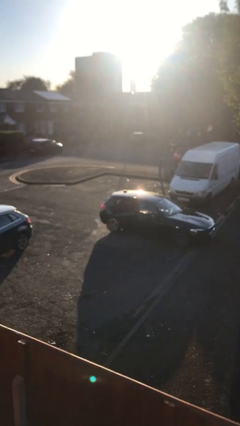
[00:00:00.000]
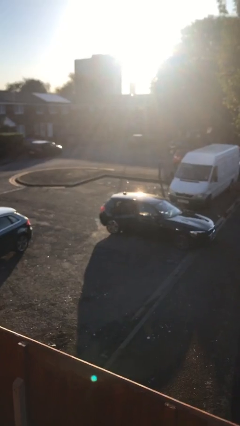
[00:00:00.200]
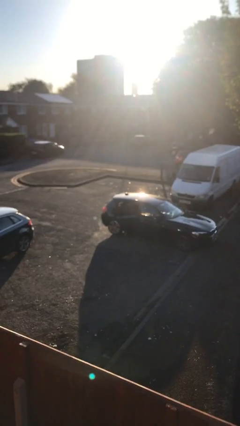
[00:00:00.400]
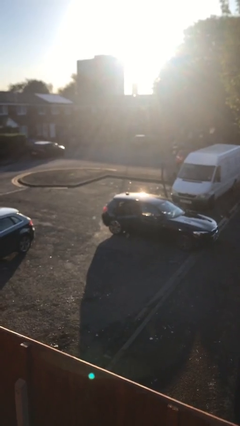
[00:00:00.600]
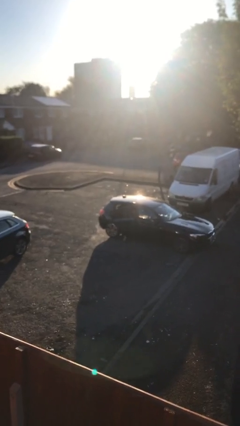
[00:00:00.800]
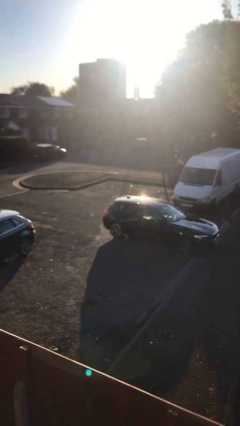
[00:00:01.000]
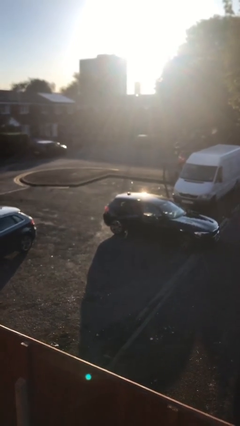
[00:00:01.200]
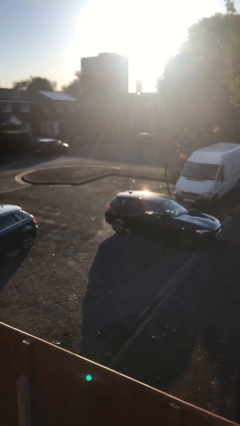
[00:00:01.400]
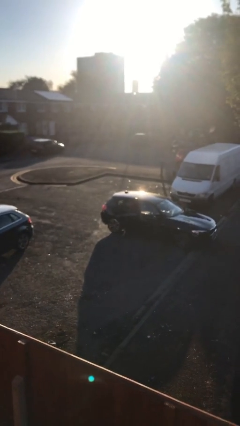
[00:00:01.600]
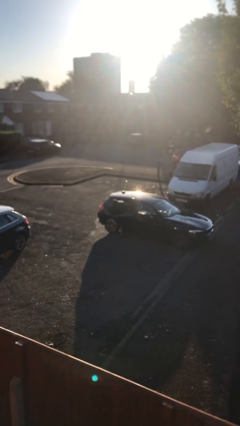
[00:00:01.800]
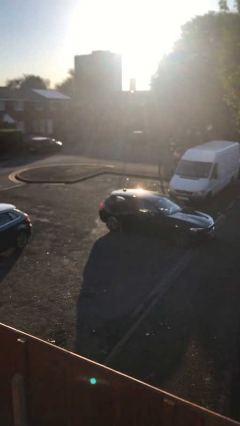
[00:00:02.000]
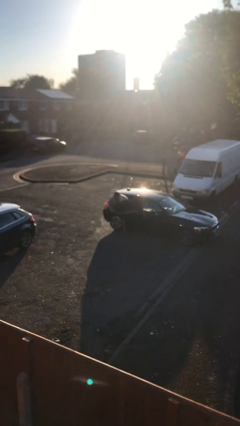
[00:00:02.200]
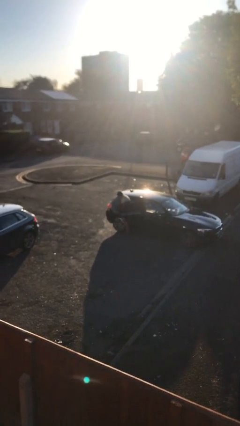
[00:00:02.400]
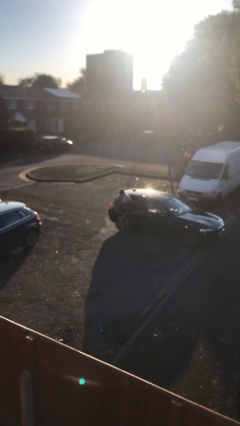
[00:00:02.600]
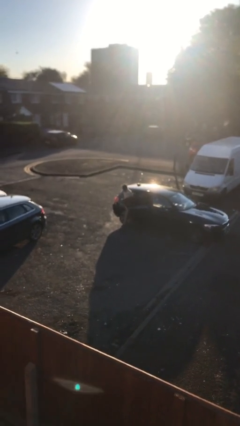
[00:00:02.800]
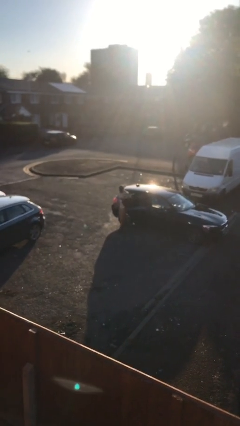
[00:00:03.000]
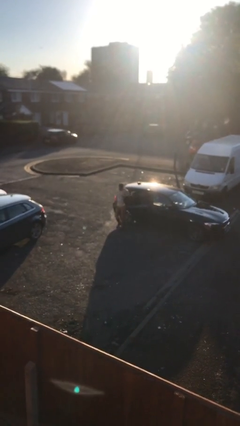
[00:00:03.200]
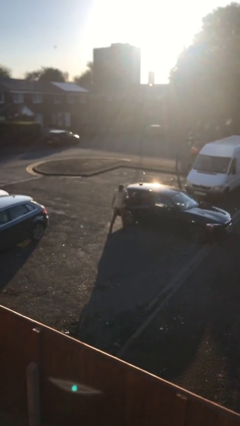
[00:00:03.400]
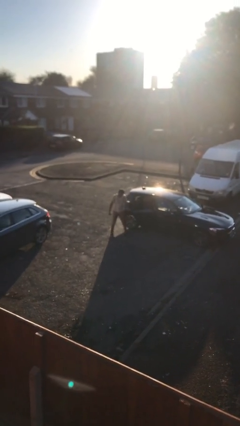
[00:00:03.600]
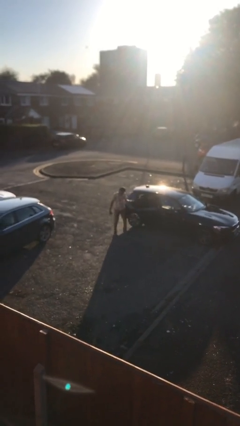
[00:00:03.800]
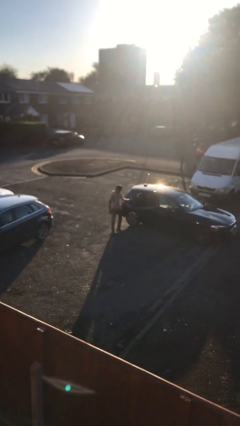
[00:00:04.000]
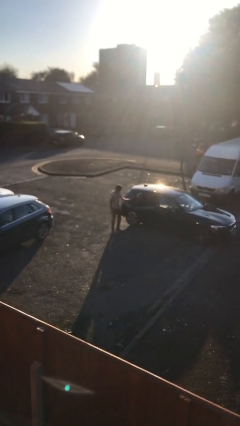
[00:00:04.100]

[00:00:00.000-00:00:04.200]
person exits car

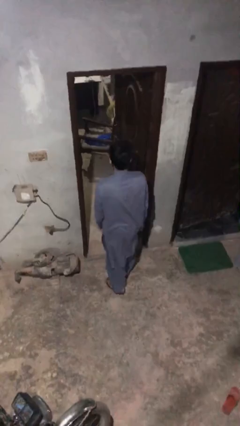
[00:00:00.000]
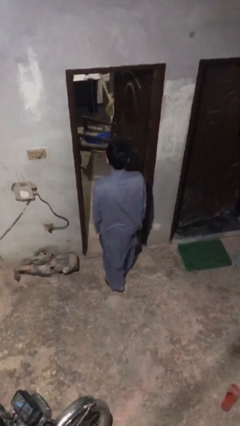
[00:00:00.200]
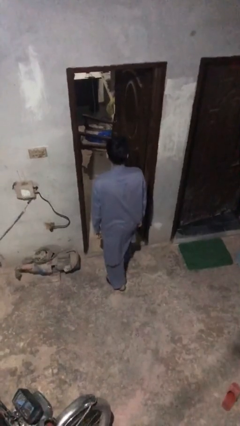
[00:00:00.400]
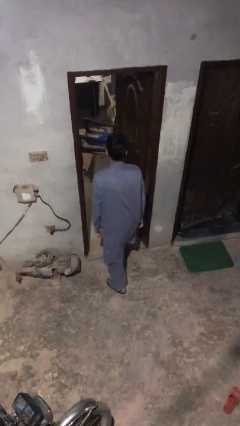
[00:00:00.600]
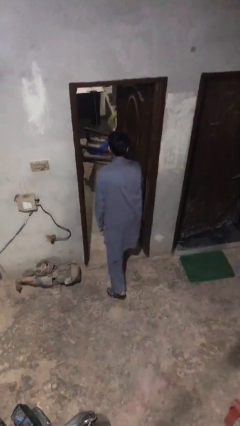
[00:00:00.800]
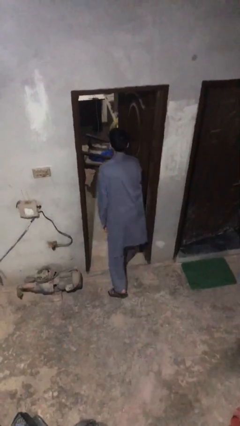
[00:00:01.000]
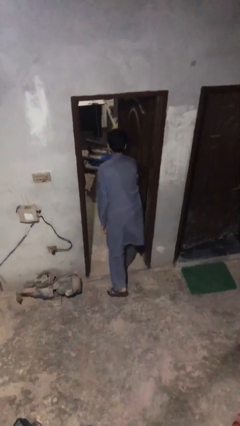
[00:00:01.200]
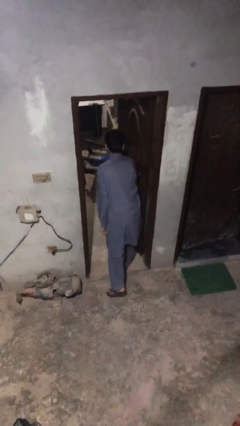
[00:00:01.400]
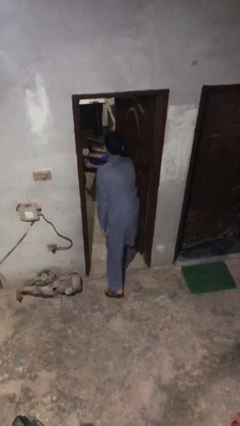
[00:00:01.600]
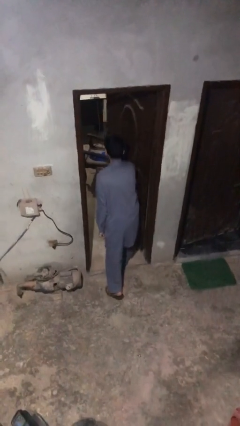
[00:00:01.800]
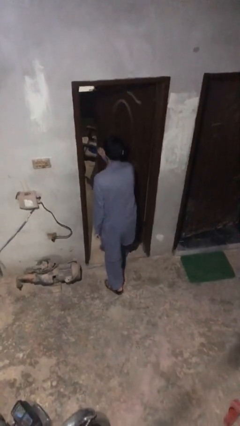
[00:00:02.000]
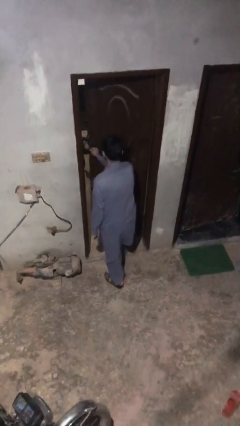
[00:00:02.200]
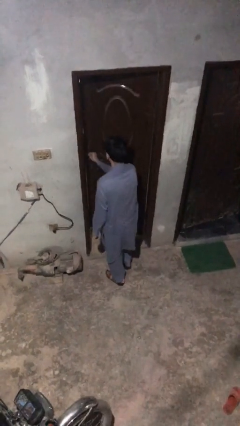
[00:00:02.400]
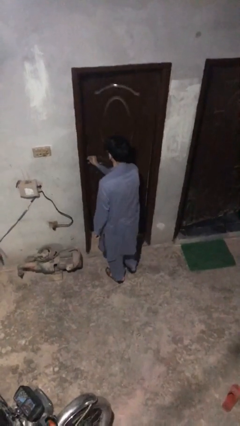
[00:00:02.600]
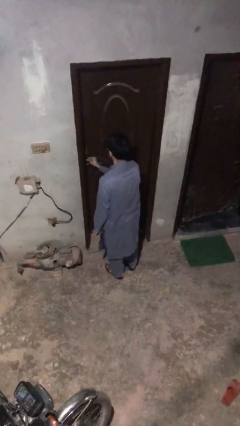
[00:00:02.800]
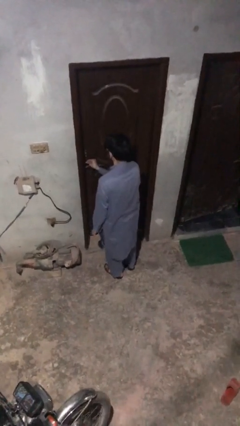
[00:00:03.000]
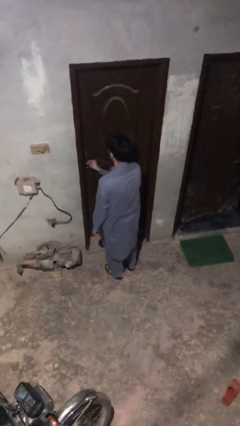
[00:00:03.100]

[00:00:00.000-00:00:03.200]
person closes facility door

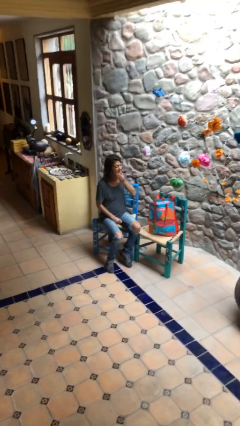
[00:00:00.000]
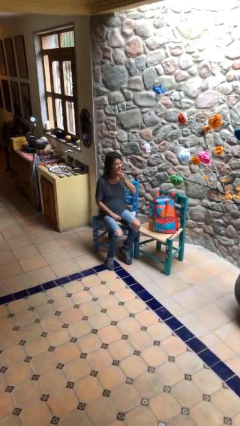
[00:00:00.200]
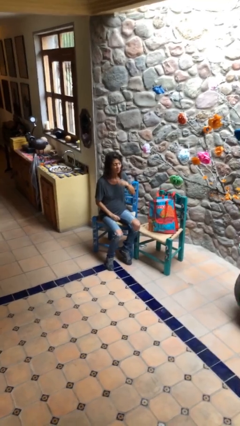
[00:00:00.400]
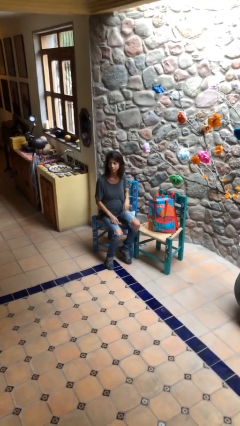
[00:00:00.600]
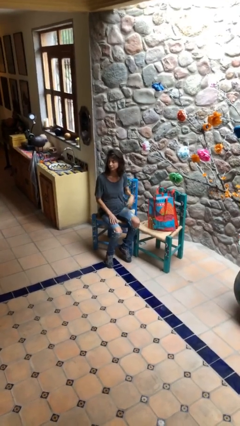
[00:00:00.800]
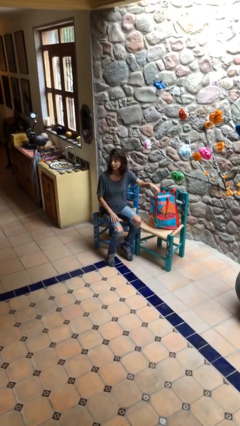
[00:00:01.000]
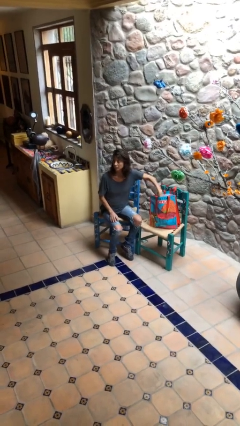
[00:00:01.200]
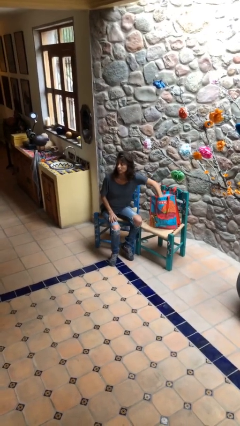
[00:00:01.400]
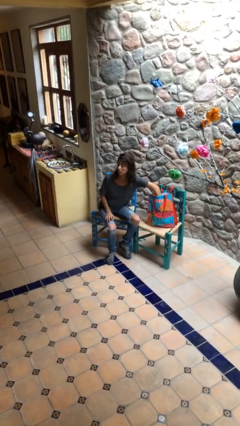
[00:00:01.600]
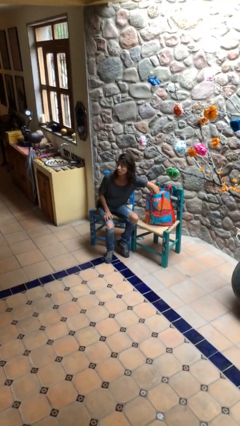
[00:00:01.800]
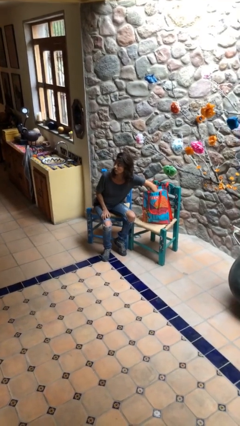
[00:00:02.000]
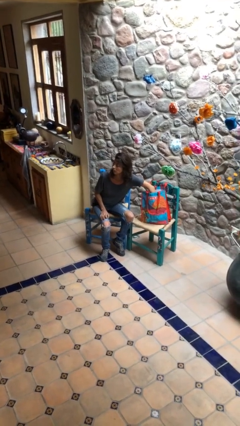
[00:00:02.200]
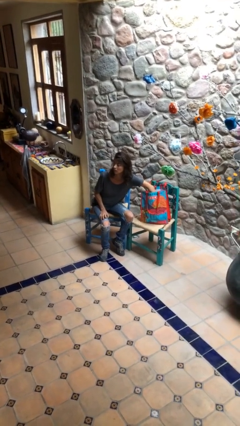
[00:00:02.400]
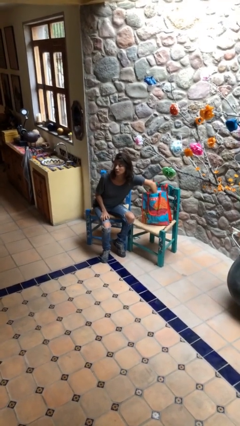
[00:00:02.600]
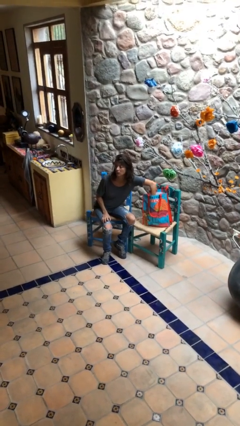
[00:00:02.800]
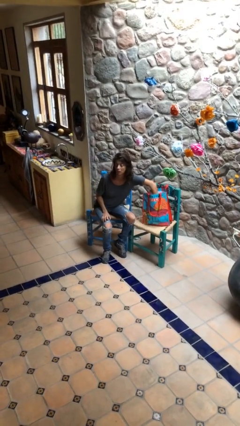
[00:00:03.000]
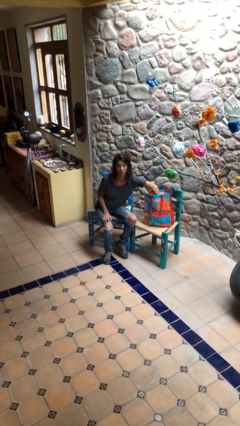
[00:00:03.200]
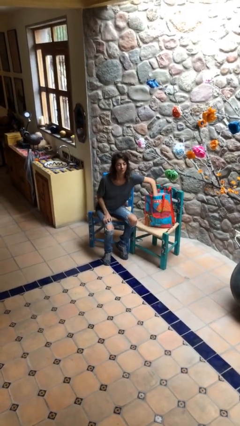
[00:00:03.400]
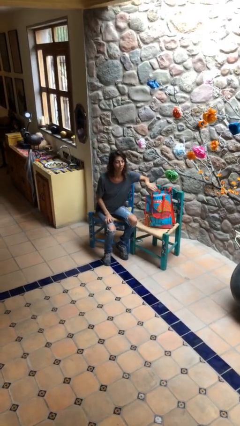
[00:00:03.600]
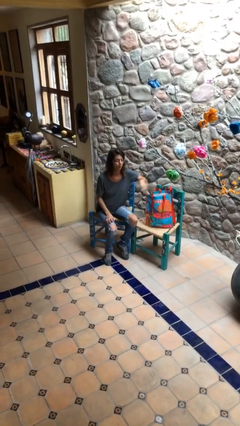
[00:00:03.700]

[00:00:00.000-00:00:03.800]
person searches in bag

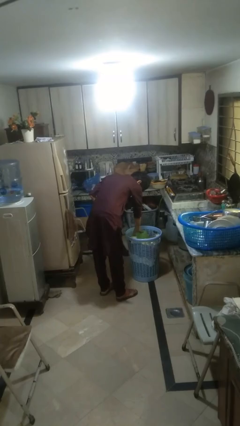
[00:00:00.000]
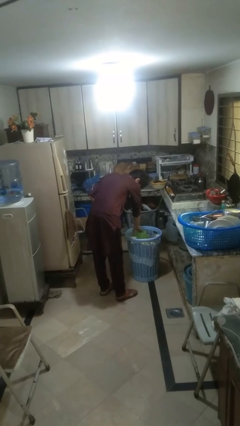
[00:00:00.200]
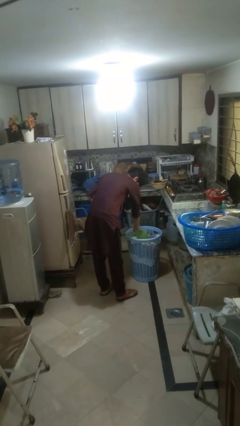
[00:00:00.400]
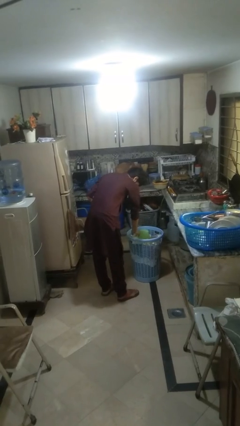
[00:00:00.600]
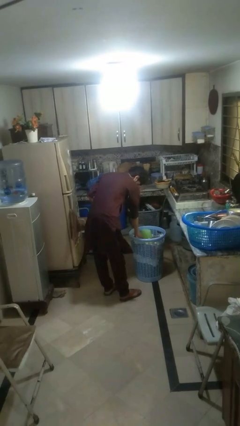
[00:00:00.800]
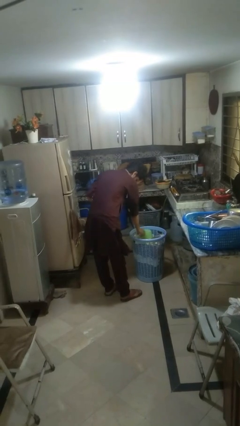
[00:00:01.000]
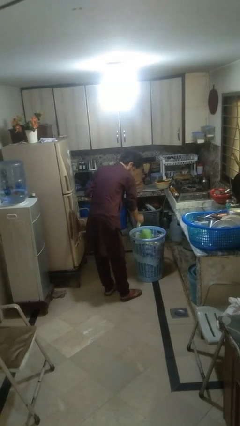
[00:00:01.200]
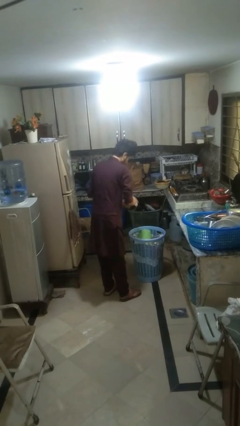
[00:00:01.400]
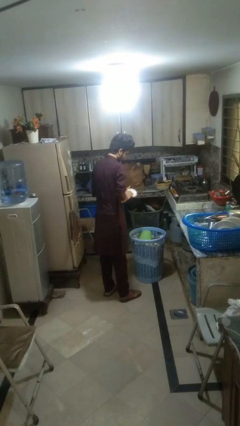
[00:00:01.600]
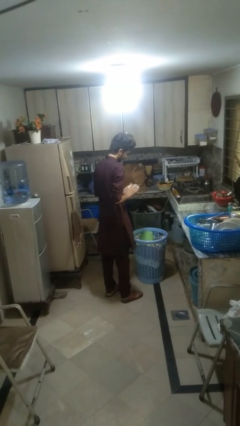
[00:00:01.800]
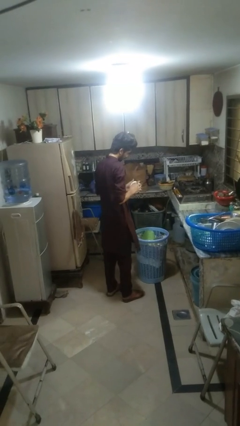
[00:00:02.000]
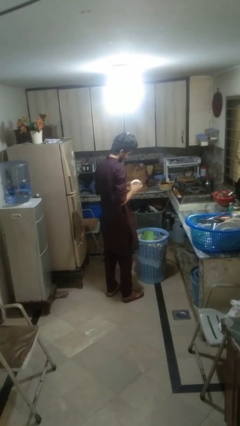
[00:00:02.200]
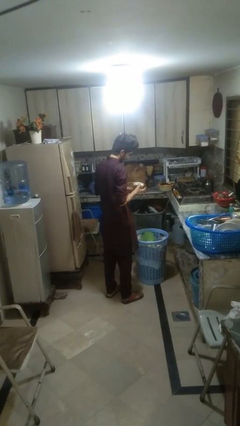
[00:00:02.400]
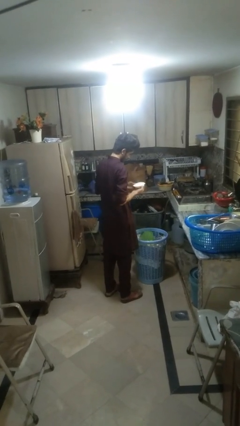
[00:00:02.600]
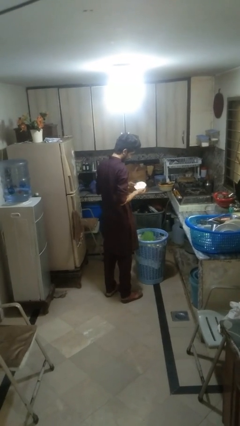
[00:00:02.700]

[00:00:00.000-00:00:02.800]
person takes object from basket

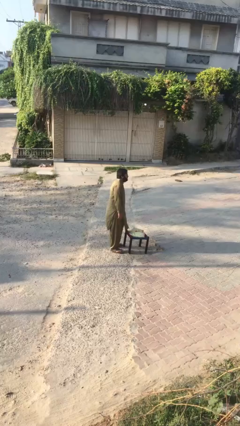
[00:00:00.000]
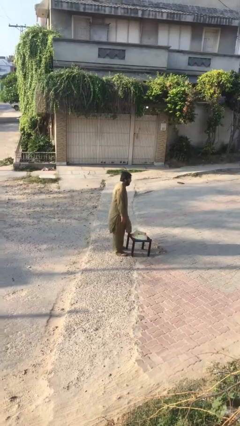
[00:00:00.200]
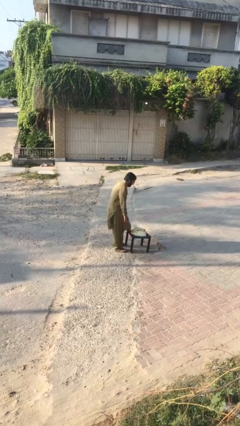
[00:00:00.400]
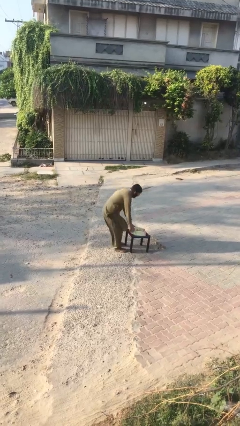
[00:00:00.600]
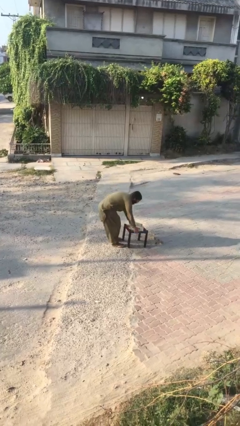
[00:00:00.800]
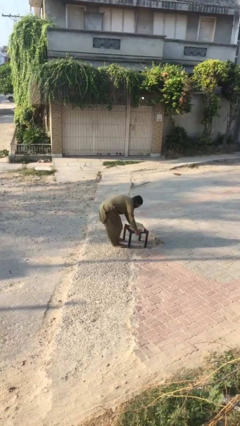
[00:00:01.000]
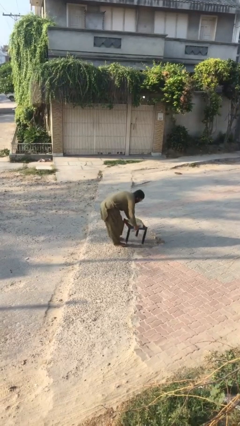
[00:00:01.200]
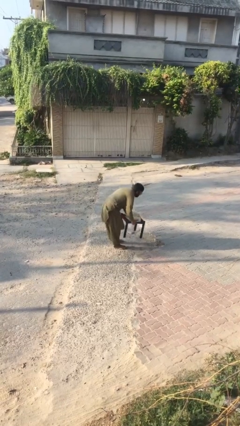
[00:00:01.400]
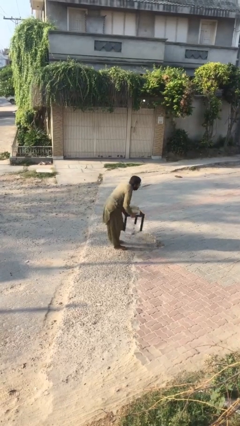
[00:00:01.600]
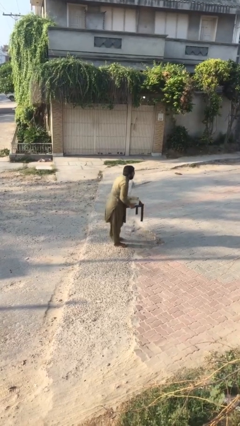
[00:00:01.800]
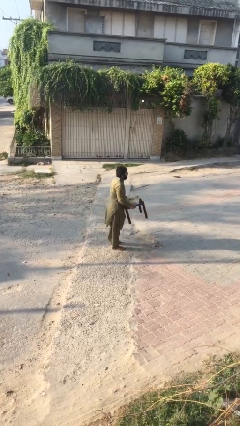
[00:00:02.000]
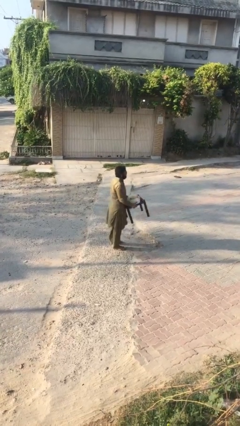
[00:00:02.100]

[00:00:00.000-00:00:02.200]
person picks up object from floor

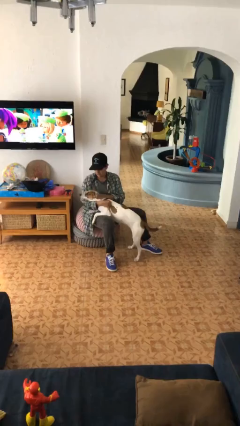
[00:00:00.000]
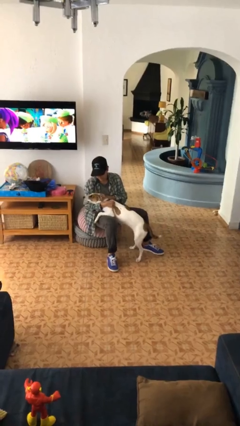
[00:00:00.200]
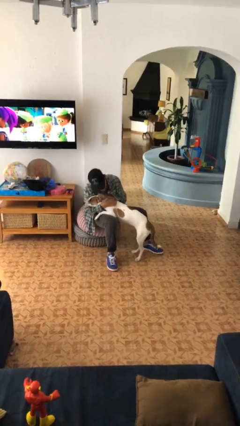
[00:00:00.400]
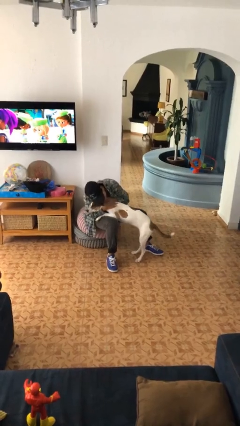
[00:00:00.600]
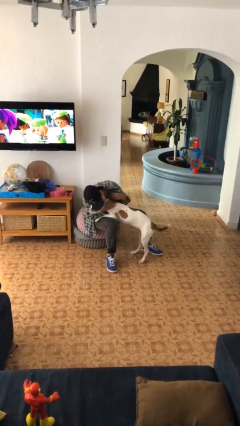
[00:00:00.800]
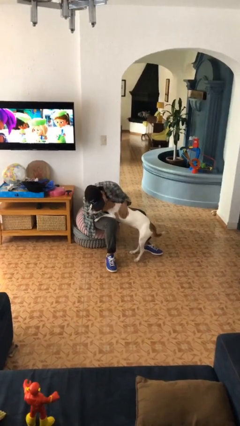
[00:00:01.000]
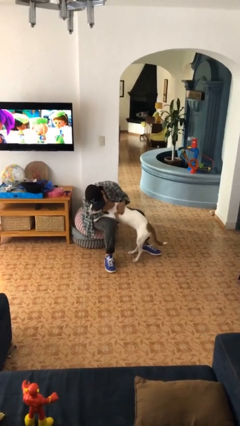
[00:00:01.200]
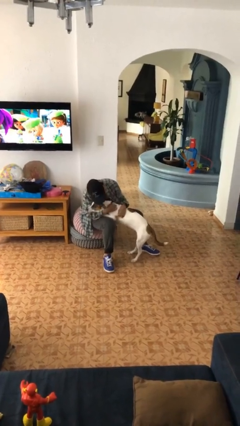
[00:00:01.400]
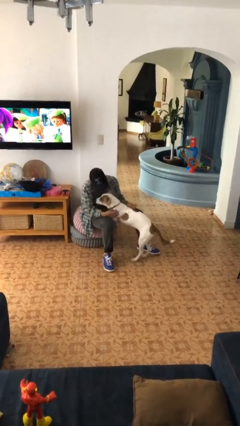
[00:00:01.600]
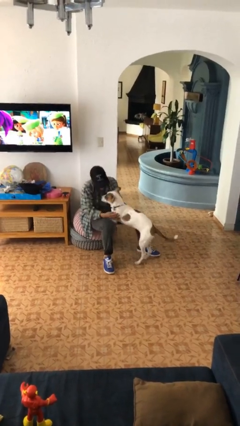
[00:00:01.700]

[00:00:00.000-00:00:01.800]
person hugs dog
